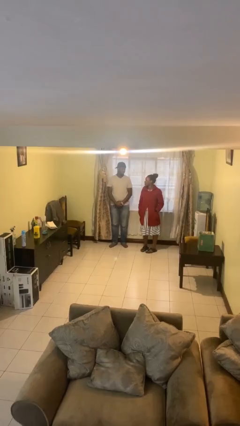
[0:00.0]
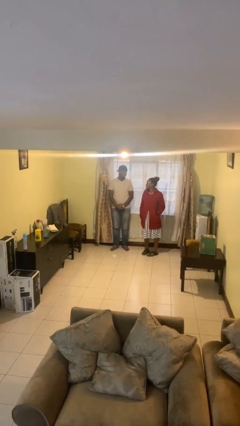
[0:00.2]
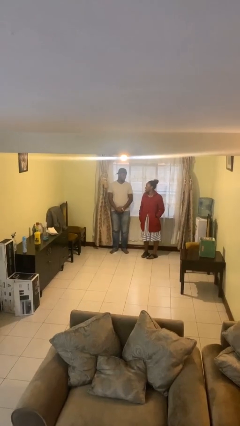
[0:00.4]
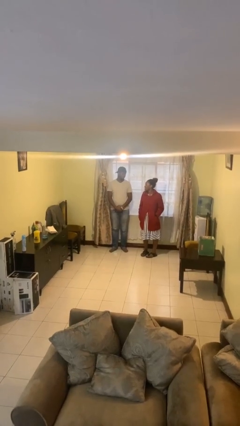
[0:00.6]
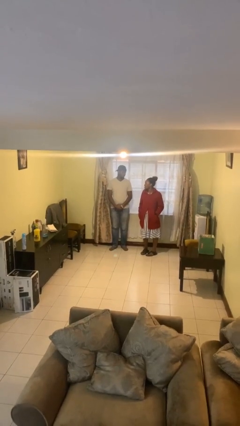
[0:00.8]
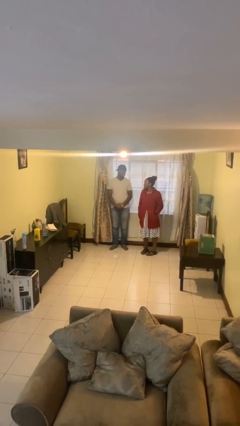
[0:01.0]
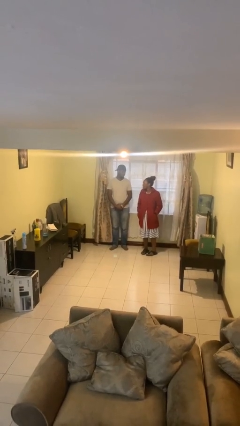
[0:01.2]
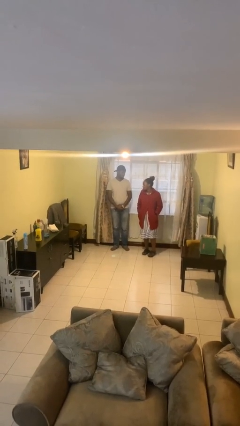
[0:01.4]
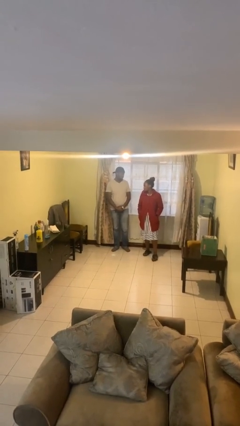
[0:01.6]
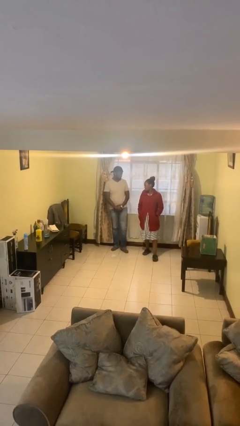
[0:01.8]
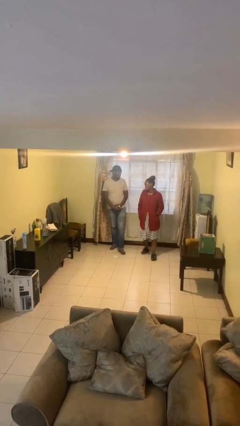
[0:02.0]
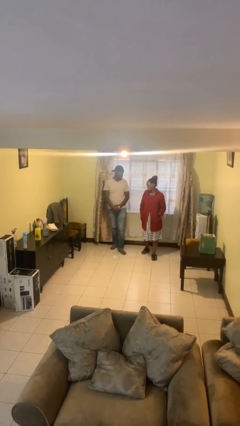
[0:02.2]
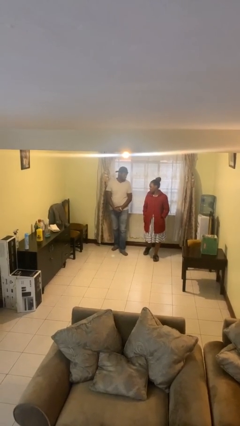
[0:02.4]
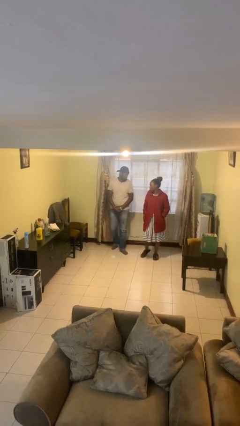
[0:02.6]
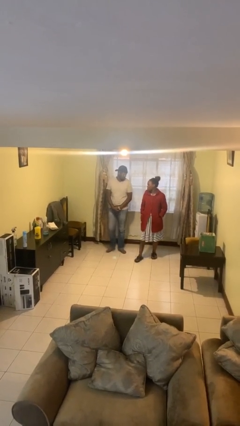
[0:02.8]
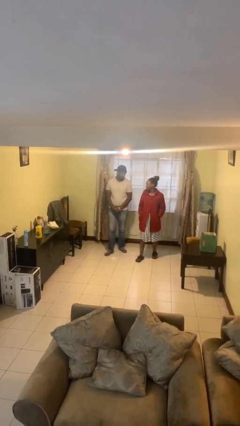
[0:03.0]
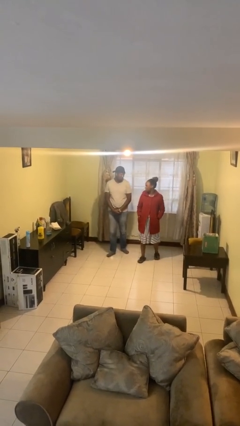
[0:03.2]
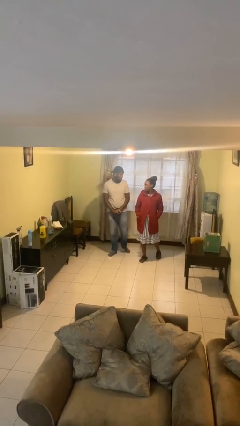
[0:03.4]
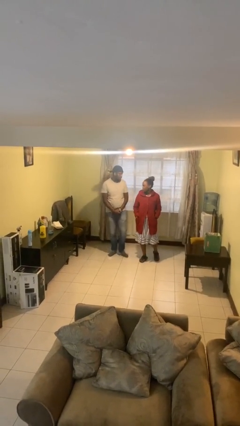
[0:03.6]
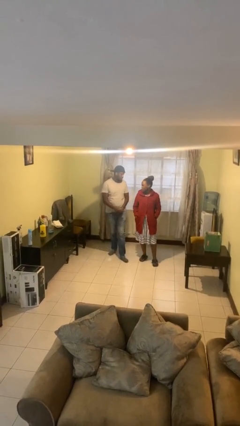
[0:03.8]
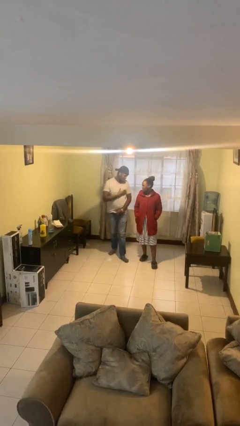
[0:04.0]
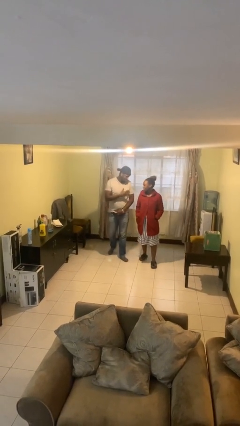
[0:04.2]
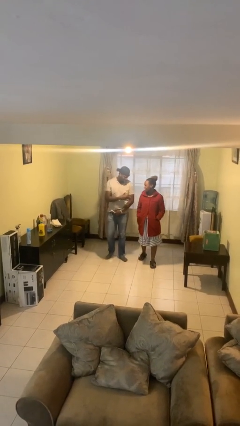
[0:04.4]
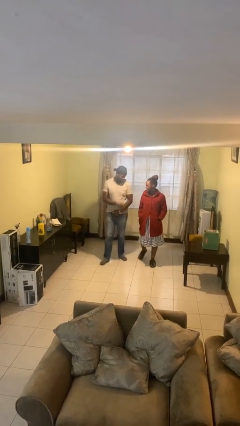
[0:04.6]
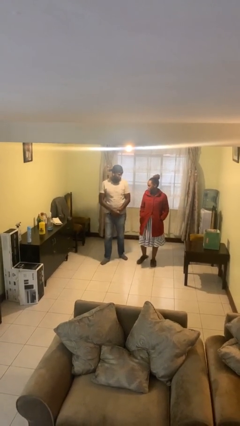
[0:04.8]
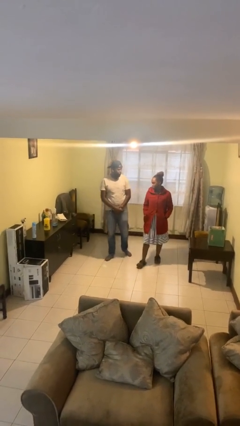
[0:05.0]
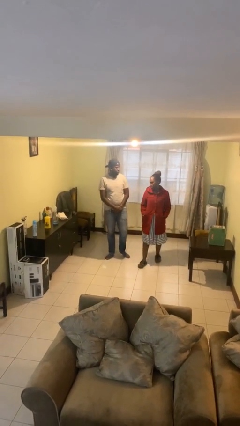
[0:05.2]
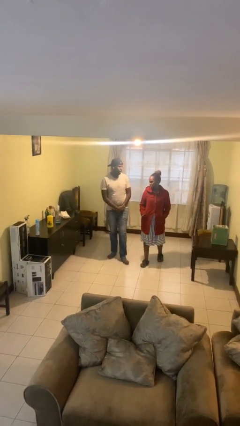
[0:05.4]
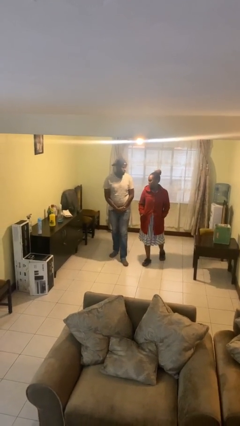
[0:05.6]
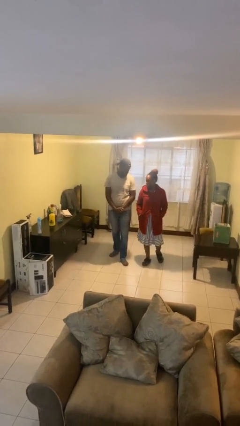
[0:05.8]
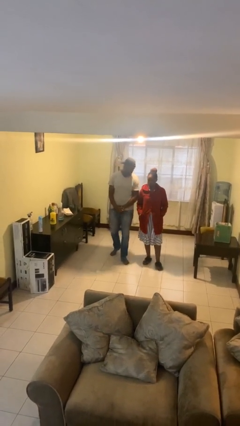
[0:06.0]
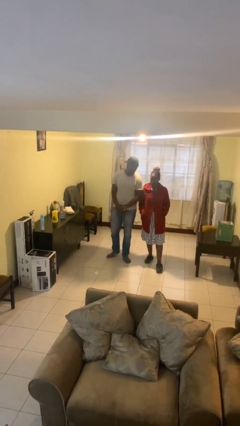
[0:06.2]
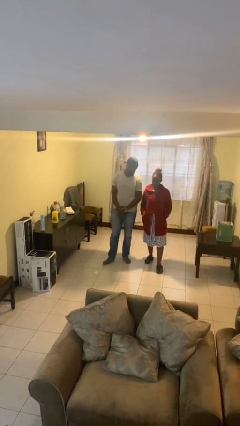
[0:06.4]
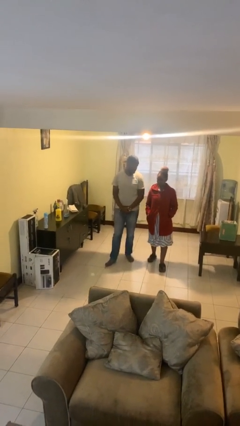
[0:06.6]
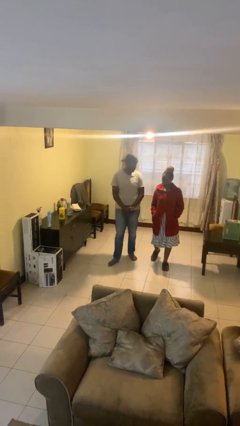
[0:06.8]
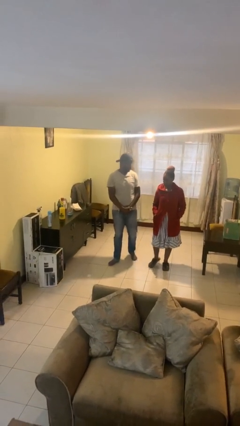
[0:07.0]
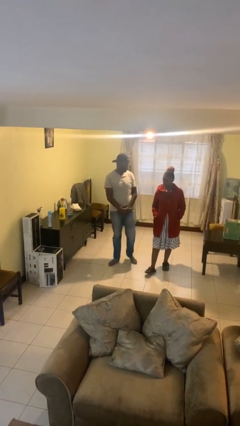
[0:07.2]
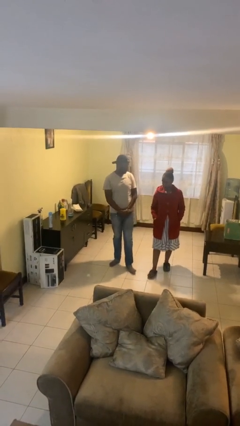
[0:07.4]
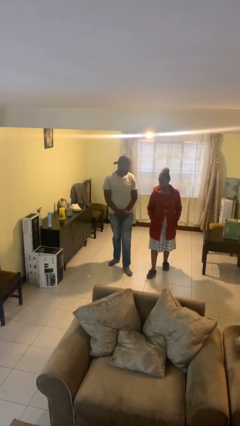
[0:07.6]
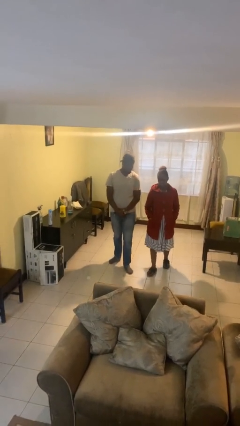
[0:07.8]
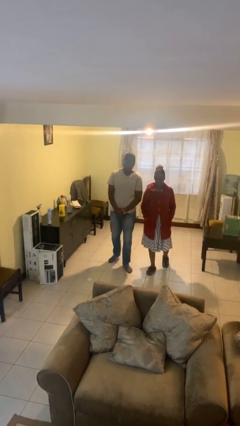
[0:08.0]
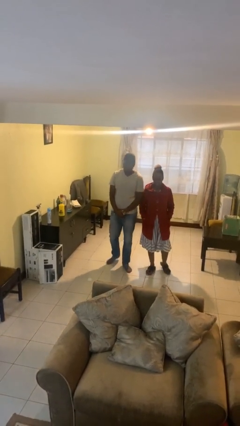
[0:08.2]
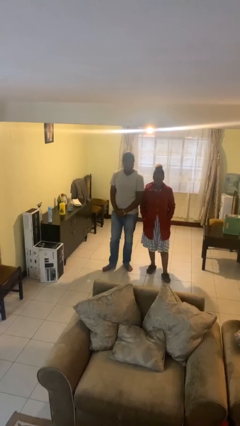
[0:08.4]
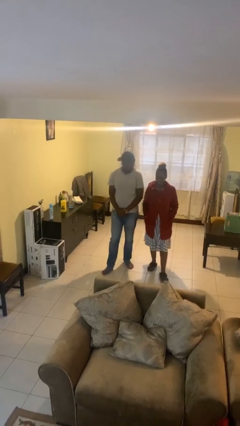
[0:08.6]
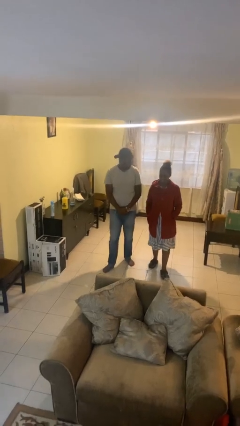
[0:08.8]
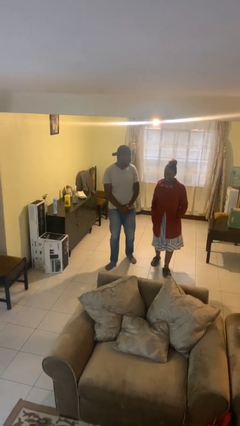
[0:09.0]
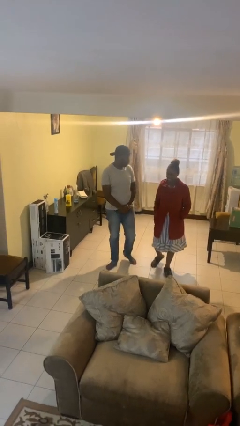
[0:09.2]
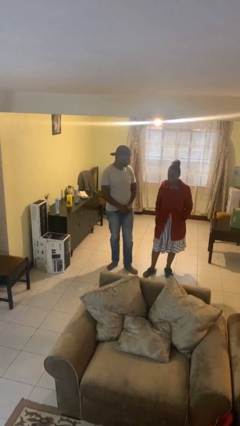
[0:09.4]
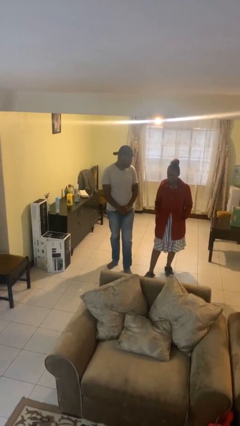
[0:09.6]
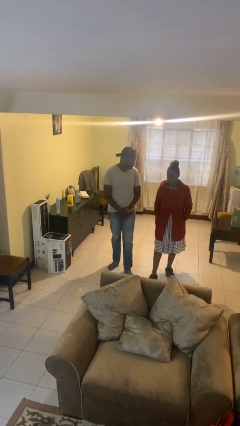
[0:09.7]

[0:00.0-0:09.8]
person talks to person

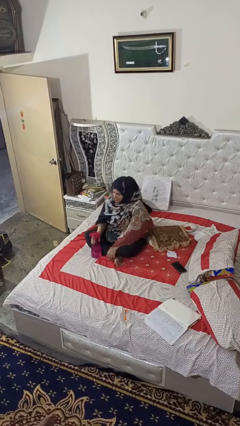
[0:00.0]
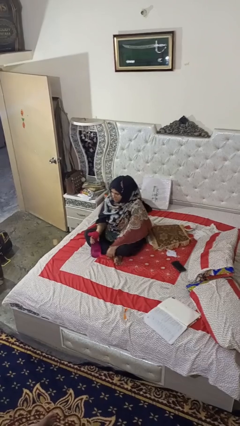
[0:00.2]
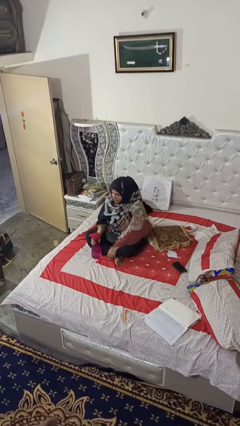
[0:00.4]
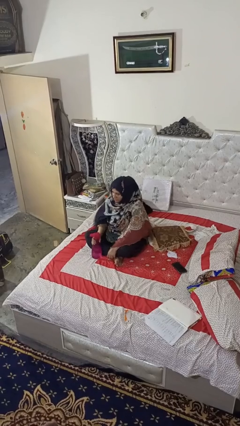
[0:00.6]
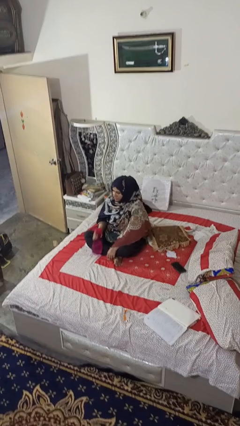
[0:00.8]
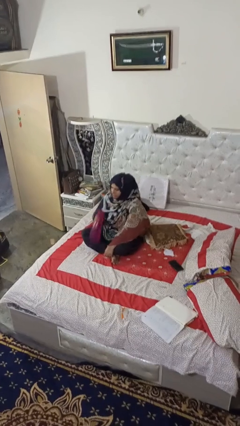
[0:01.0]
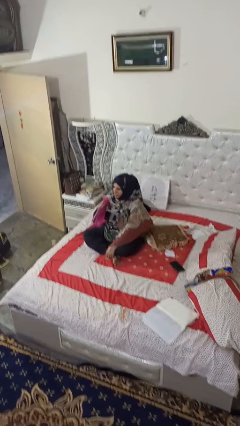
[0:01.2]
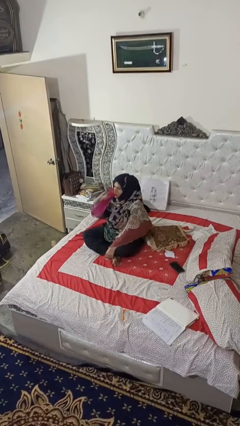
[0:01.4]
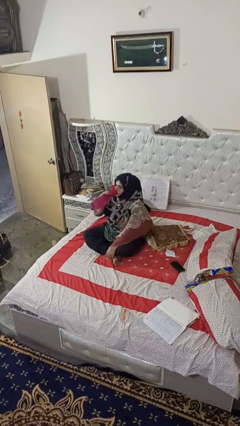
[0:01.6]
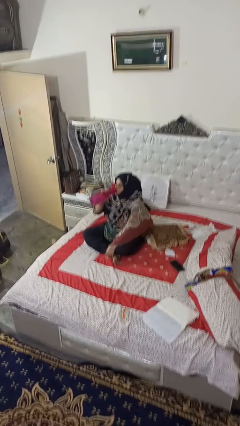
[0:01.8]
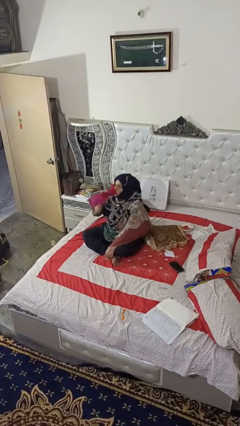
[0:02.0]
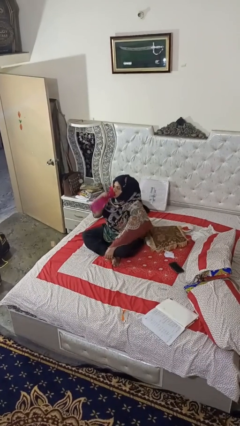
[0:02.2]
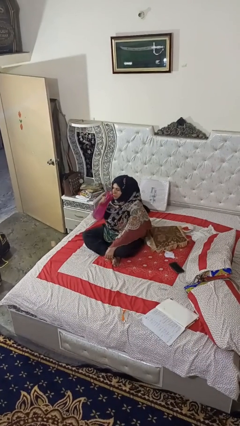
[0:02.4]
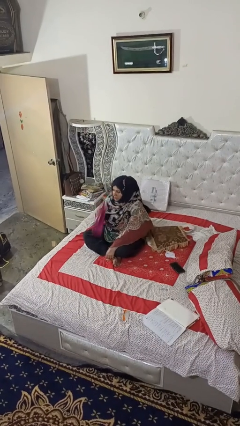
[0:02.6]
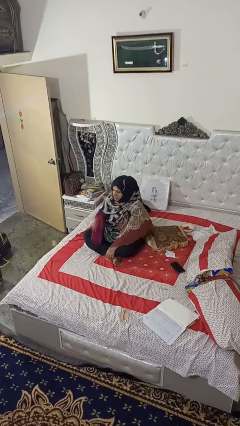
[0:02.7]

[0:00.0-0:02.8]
person drinks from bottle

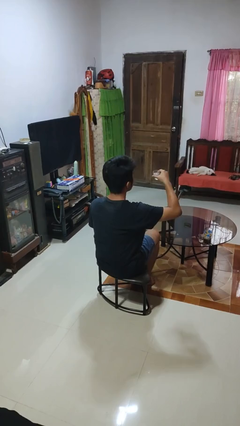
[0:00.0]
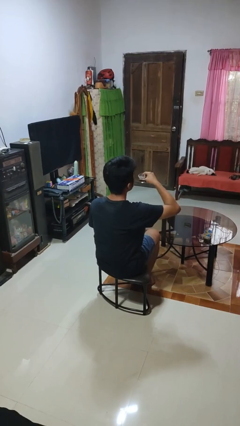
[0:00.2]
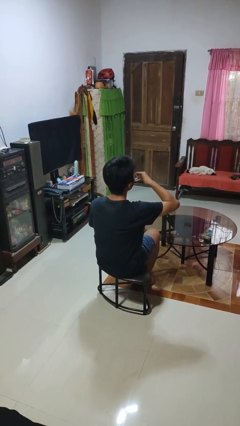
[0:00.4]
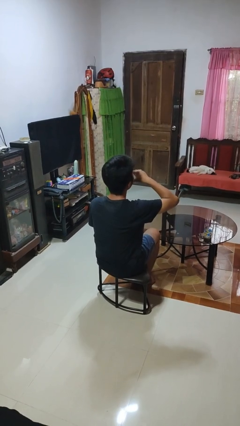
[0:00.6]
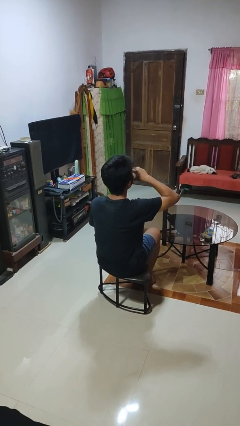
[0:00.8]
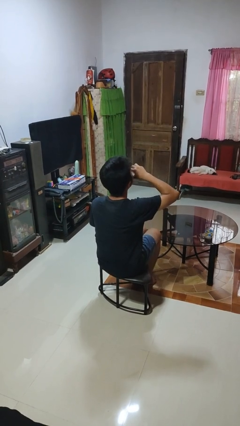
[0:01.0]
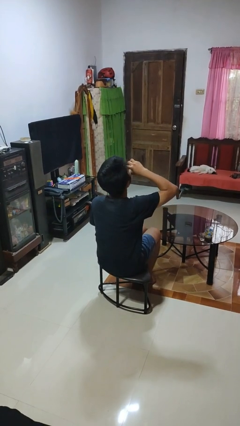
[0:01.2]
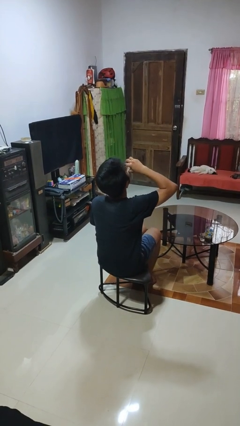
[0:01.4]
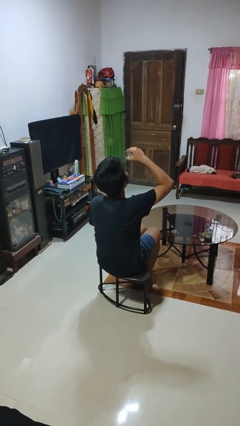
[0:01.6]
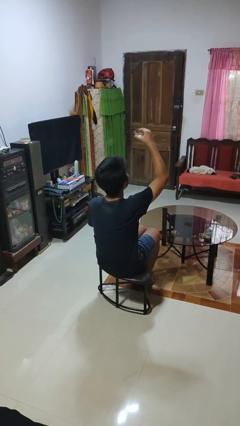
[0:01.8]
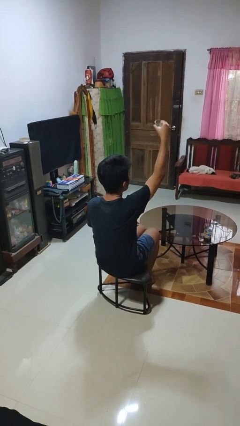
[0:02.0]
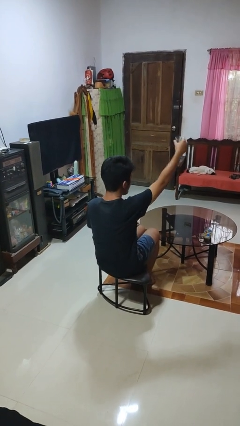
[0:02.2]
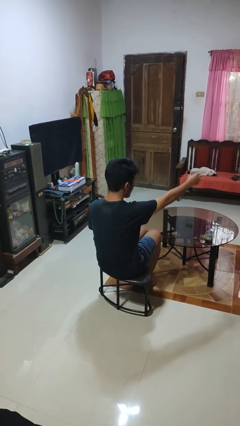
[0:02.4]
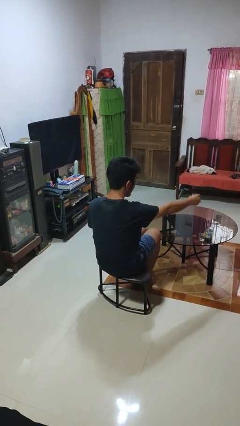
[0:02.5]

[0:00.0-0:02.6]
person drinks from shotglass

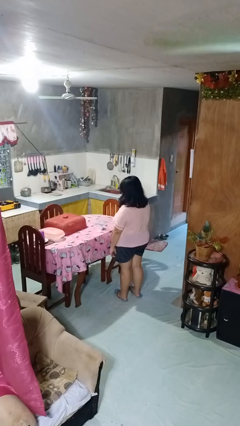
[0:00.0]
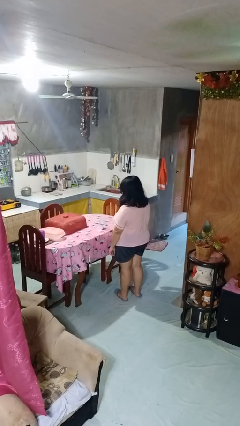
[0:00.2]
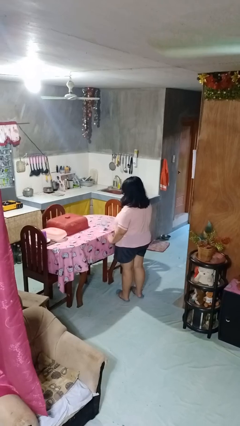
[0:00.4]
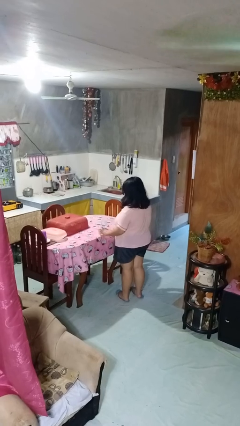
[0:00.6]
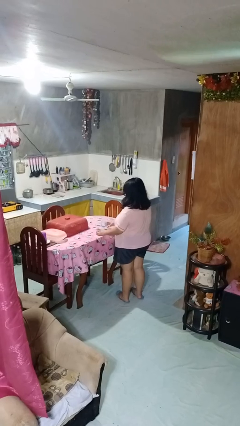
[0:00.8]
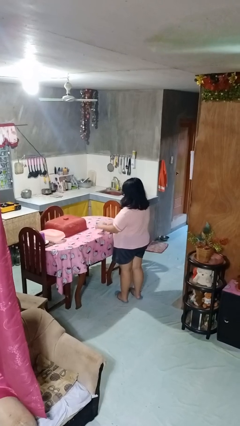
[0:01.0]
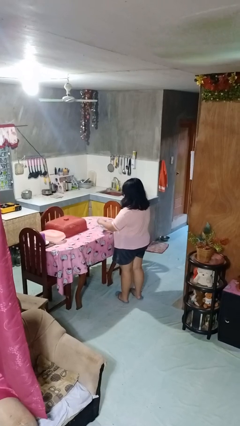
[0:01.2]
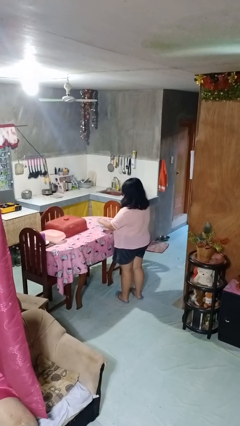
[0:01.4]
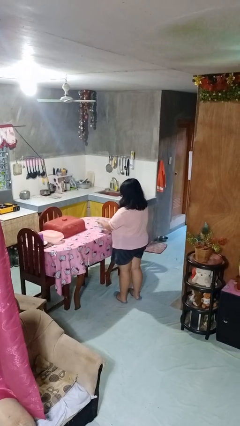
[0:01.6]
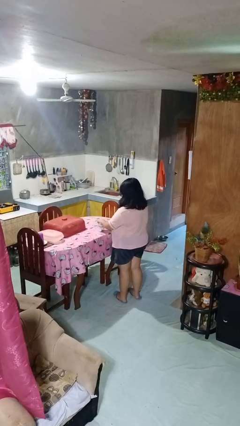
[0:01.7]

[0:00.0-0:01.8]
person closes jar

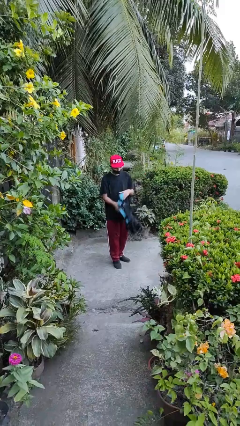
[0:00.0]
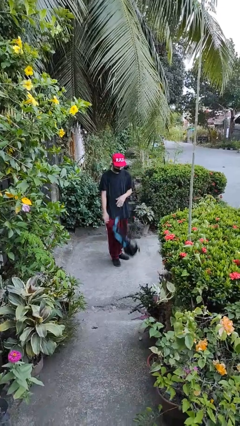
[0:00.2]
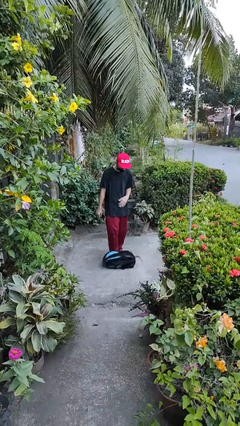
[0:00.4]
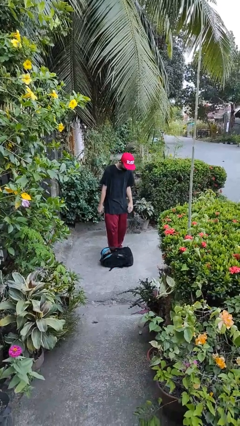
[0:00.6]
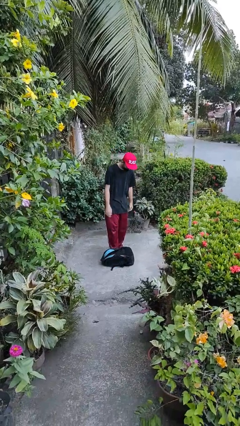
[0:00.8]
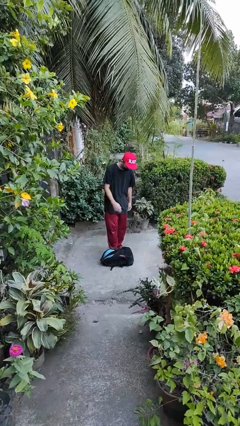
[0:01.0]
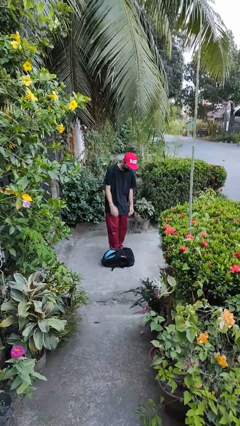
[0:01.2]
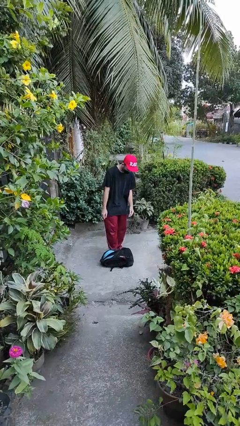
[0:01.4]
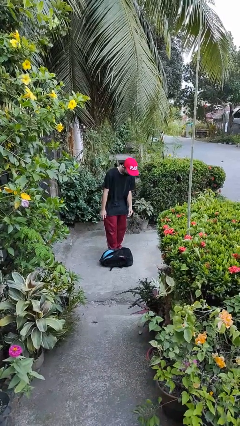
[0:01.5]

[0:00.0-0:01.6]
person drops object
